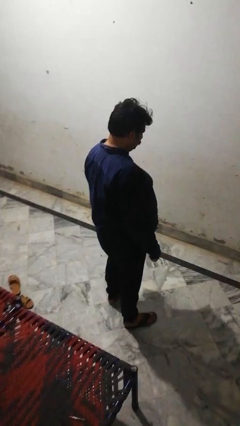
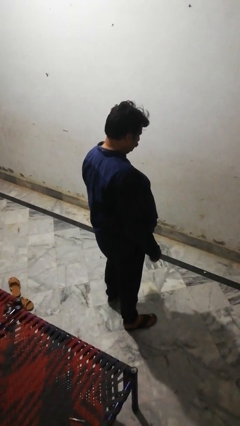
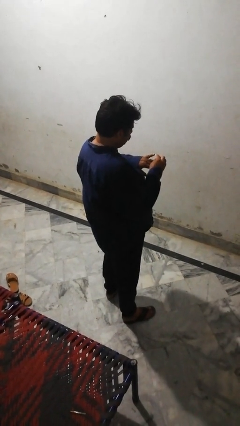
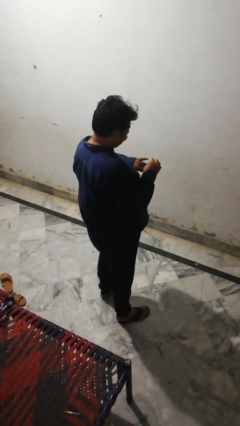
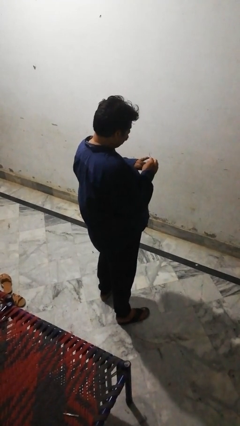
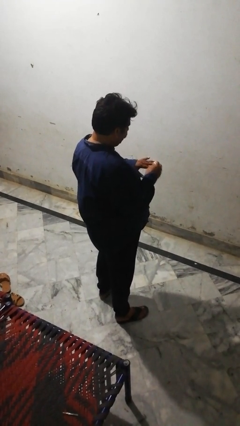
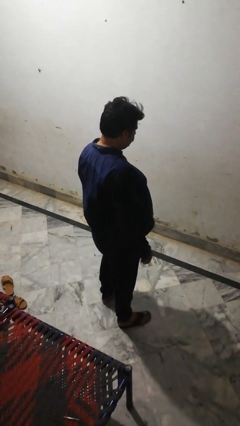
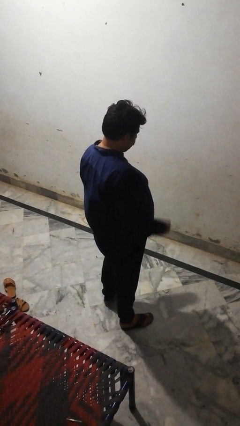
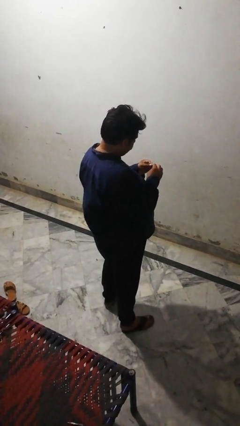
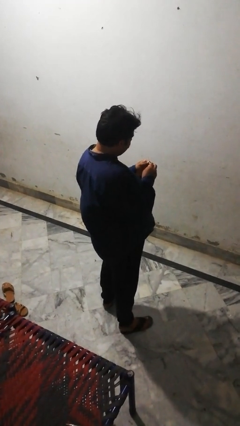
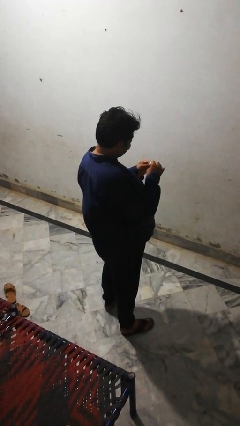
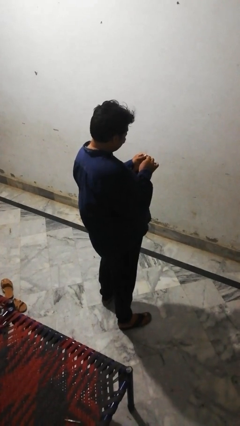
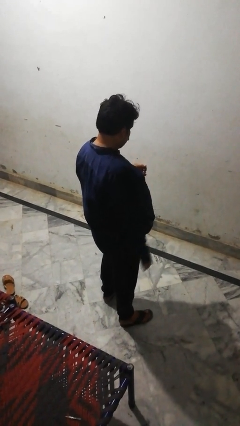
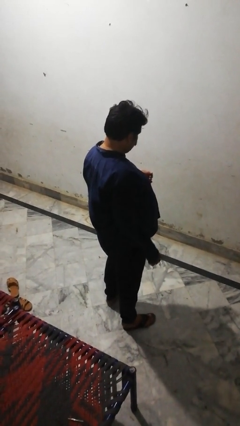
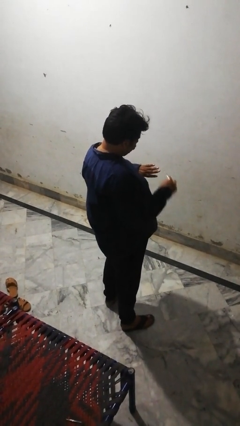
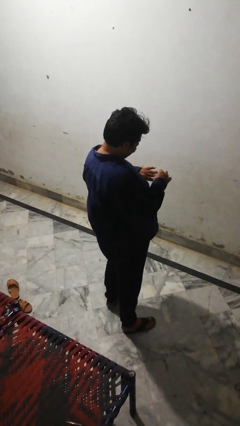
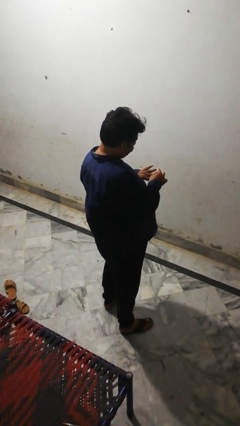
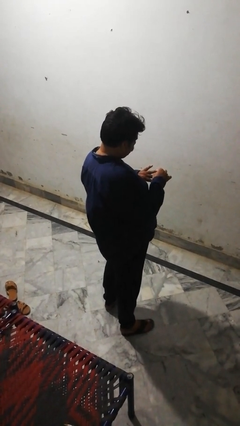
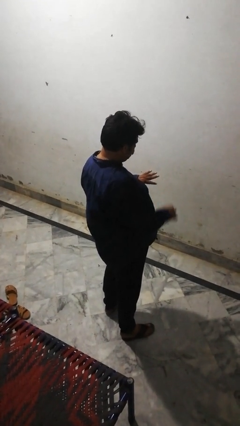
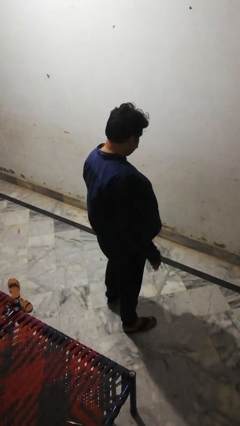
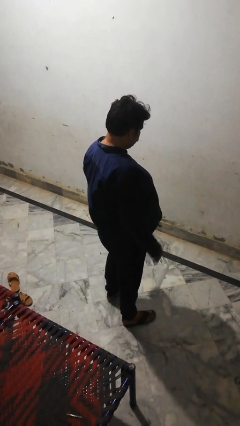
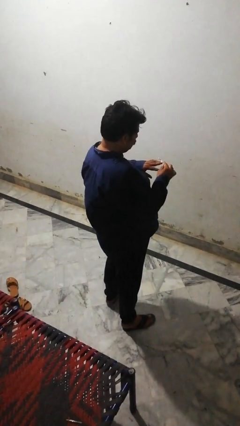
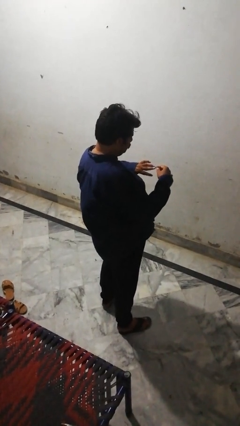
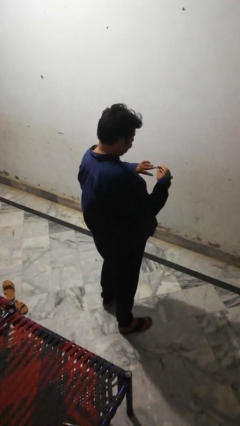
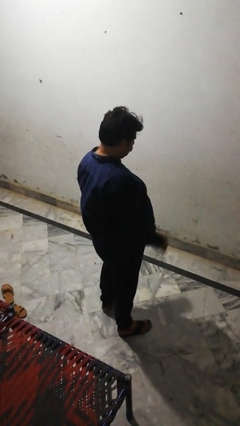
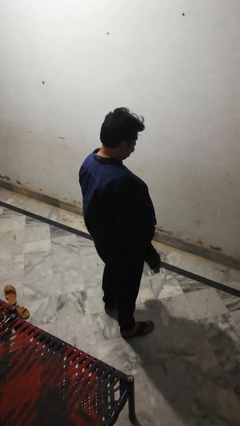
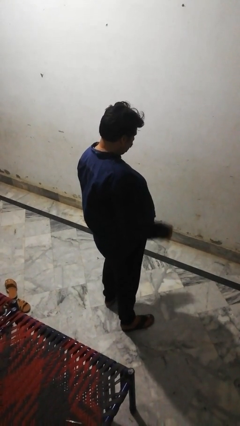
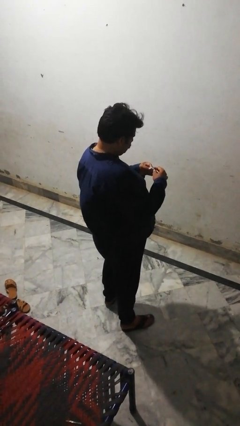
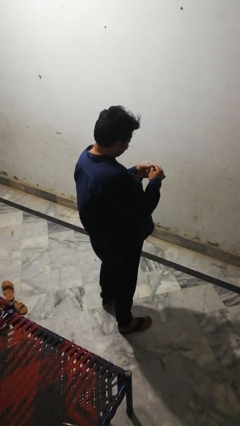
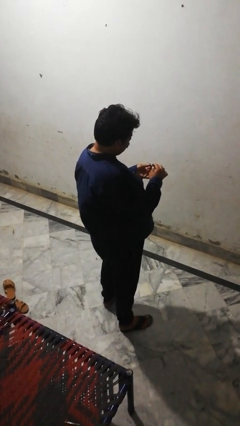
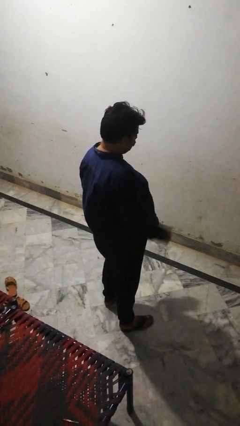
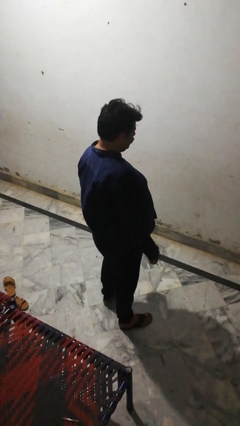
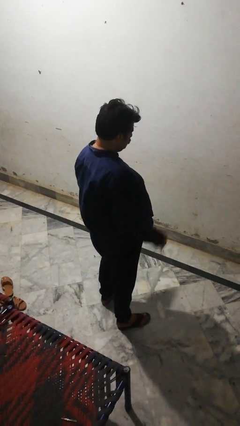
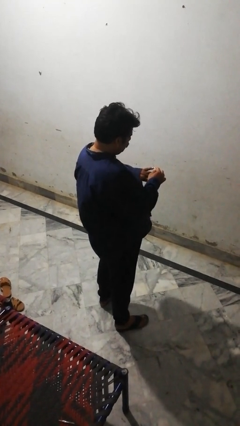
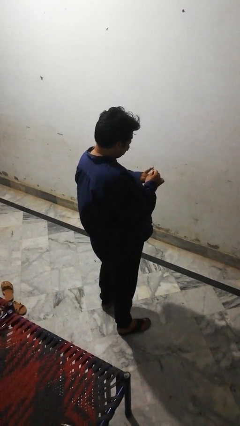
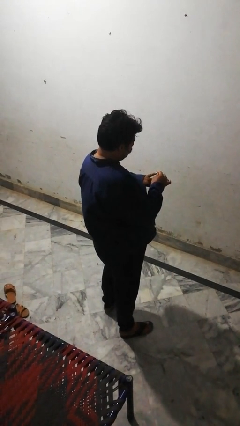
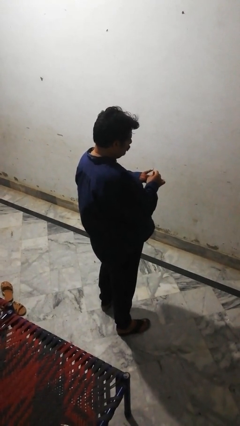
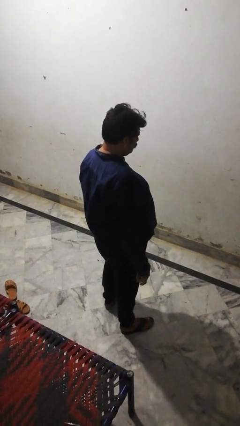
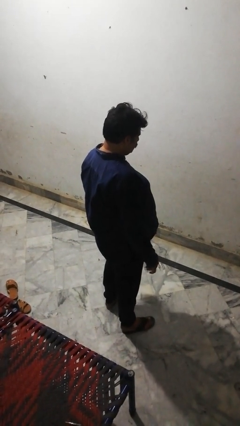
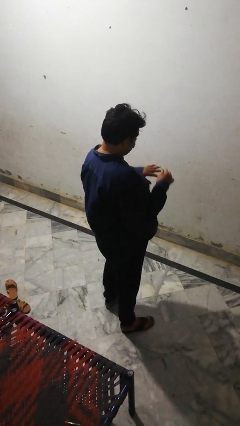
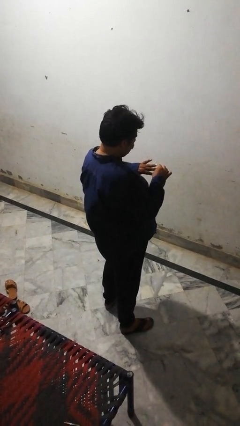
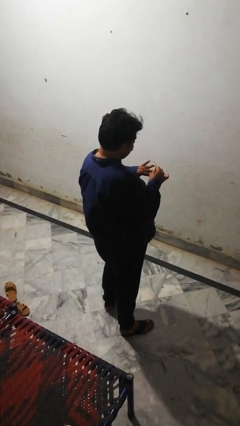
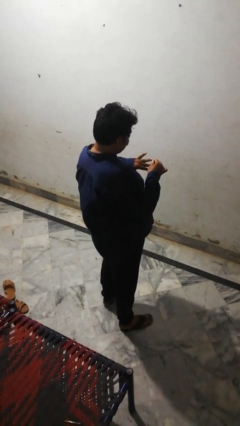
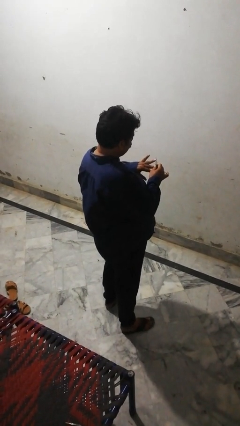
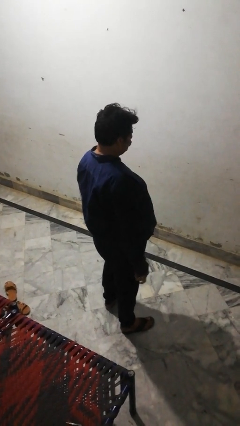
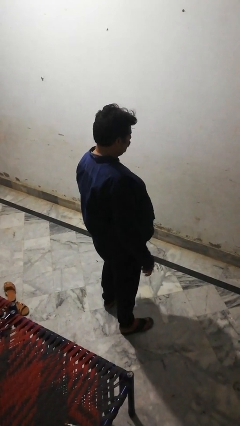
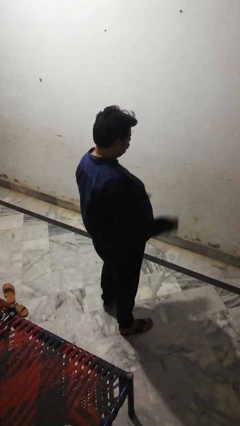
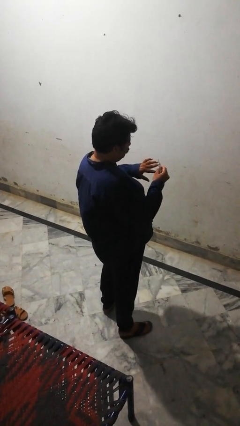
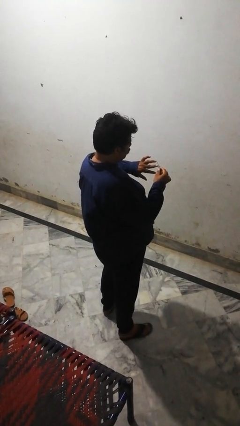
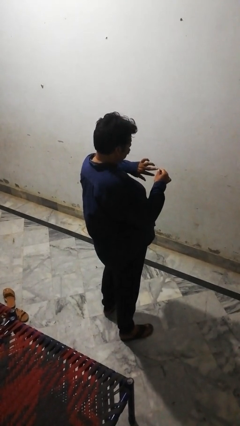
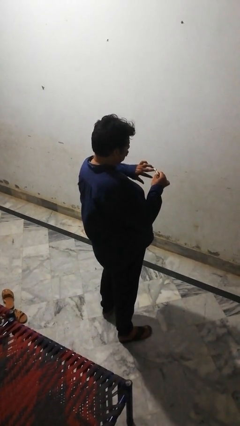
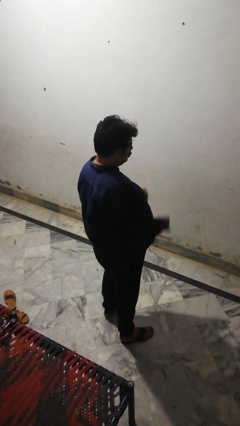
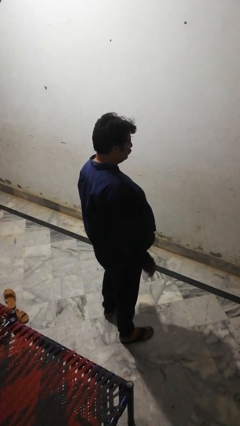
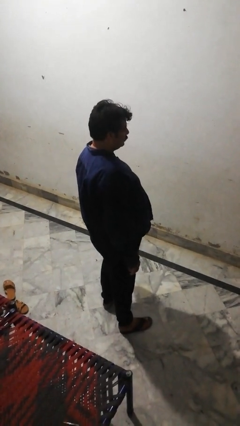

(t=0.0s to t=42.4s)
person files fingernails

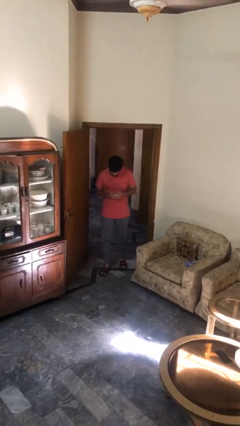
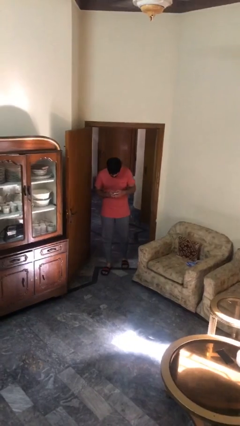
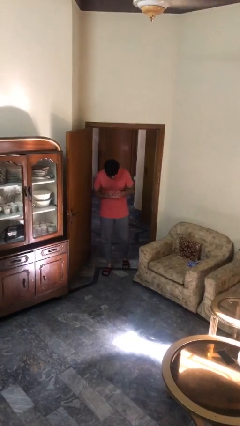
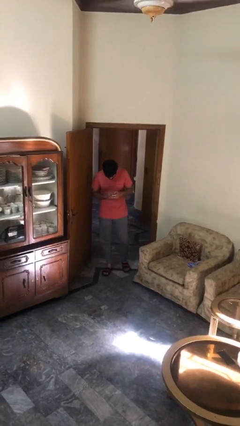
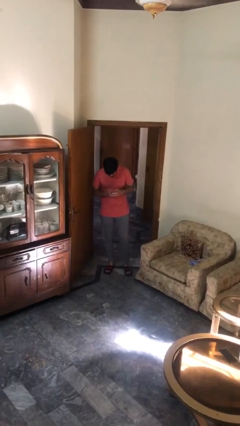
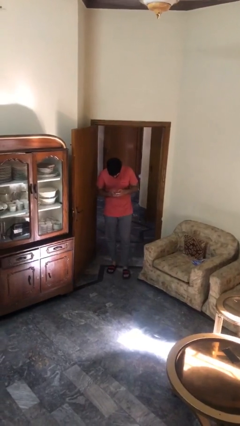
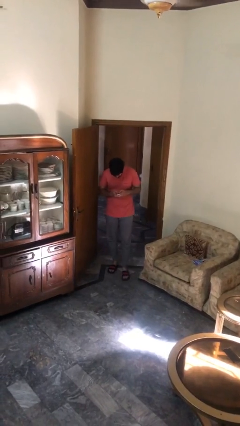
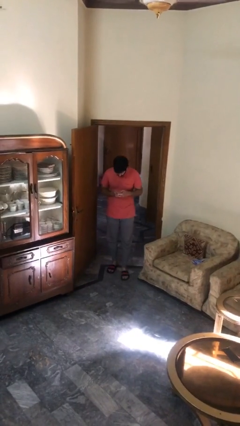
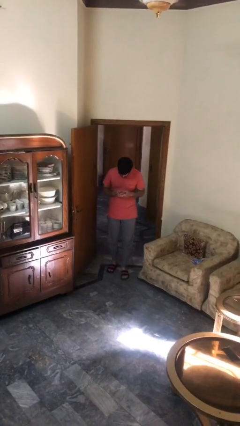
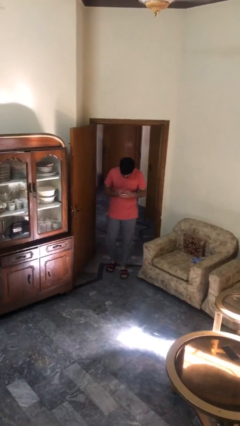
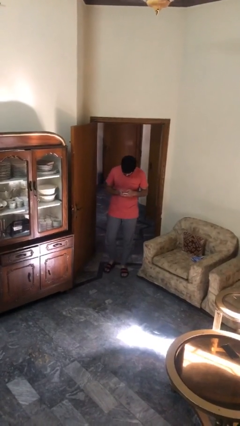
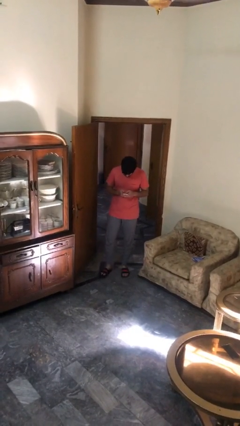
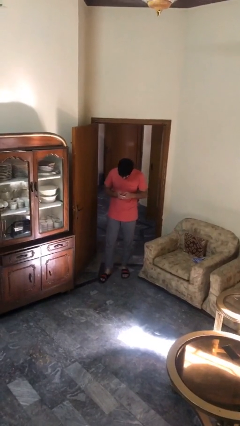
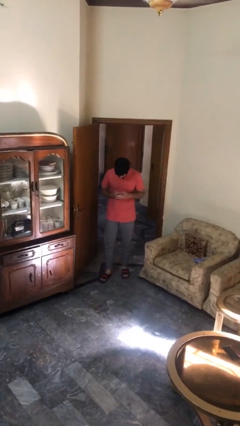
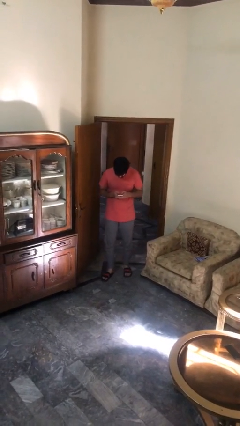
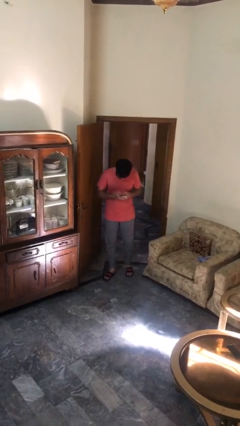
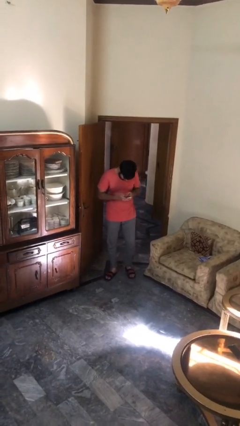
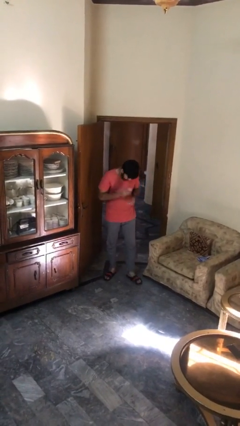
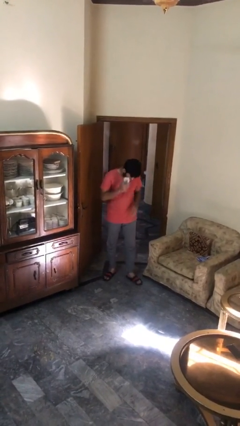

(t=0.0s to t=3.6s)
person texts on phone

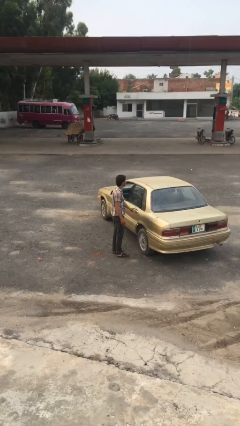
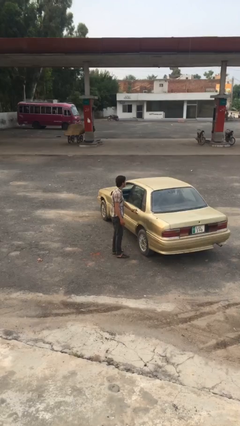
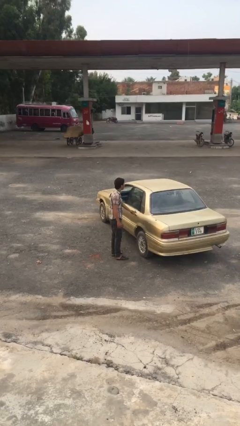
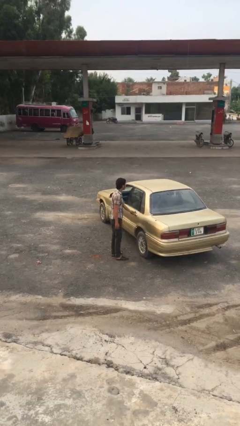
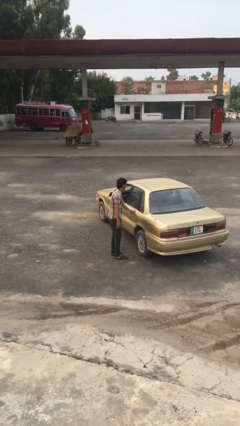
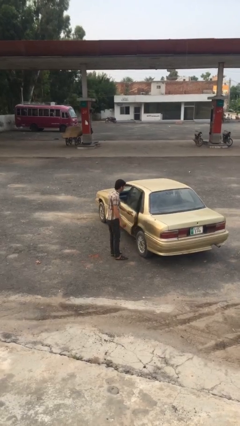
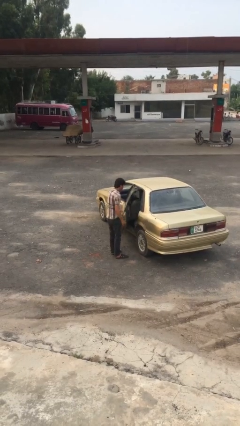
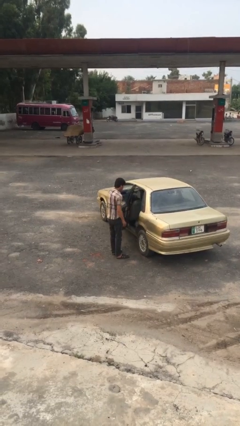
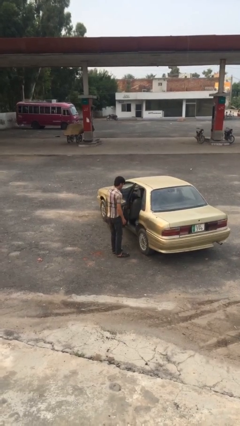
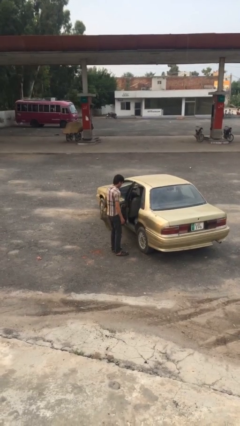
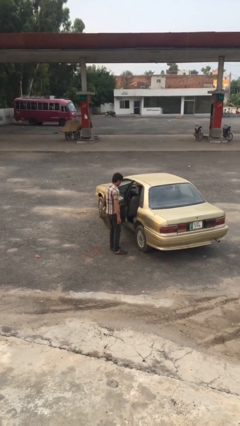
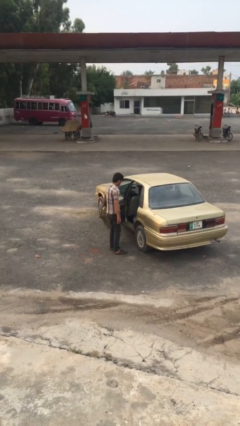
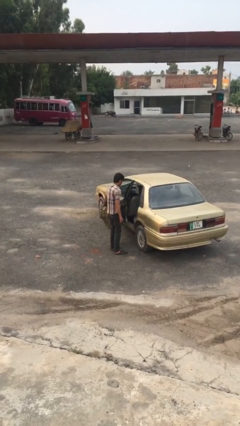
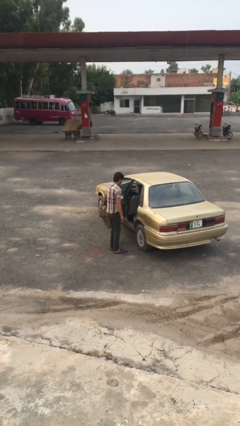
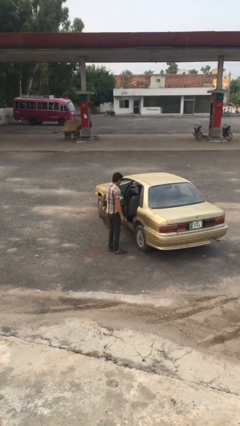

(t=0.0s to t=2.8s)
person opens car door

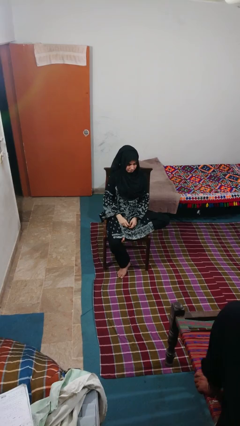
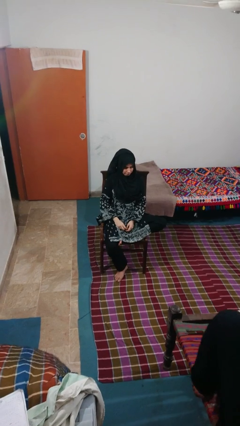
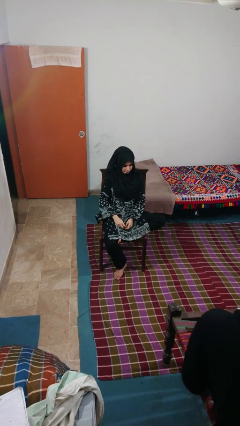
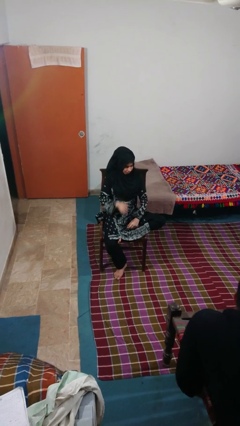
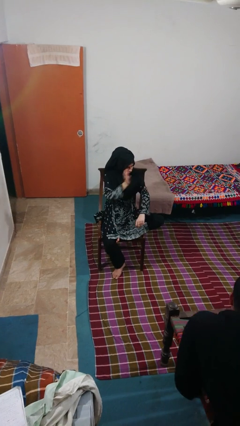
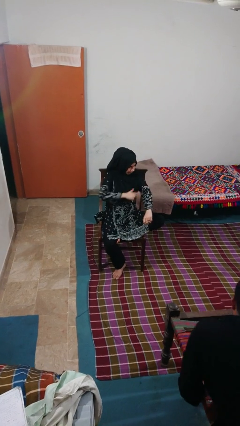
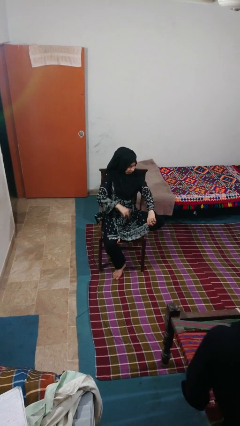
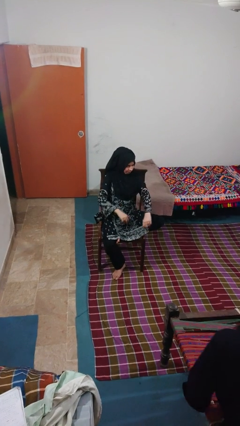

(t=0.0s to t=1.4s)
person swats bug
